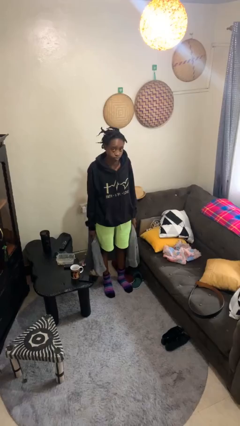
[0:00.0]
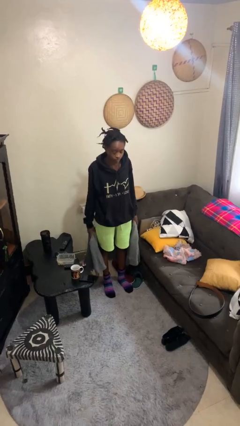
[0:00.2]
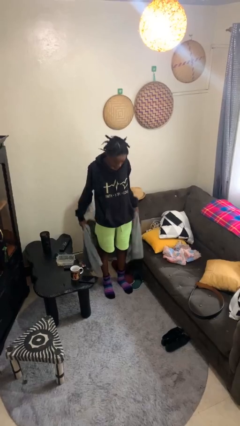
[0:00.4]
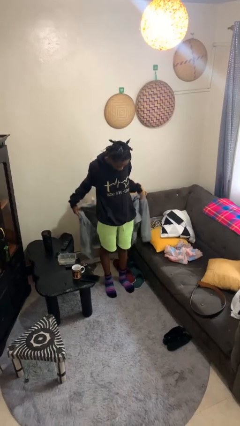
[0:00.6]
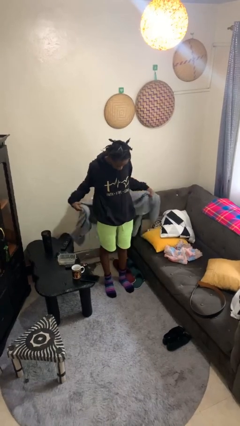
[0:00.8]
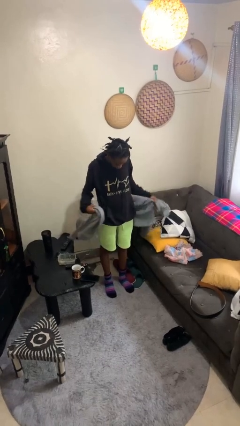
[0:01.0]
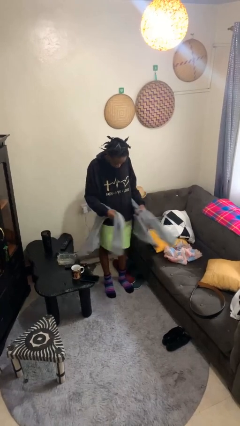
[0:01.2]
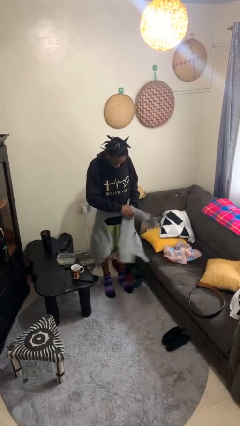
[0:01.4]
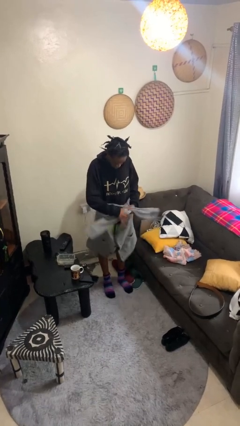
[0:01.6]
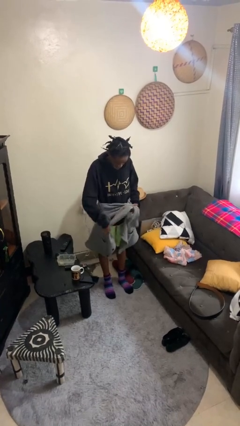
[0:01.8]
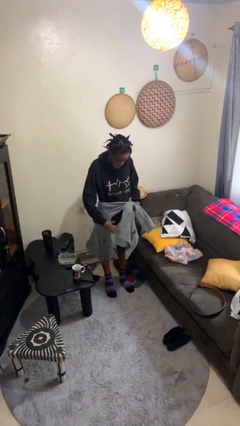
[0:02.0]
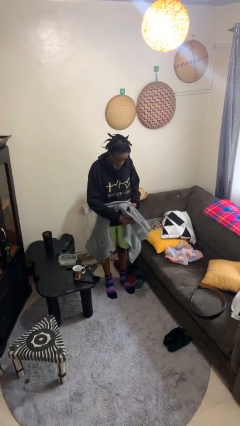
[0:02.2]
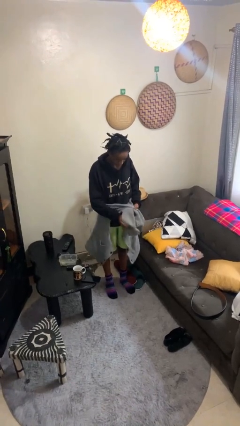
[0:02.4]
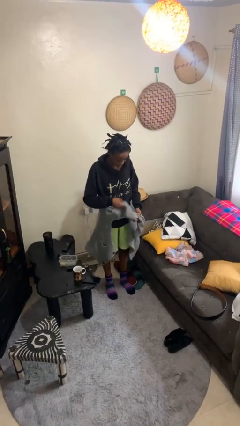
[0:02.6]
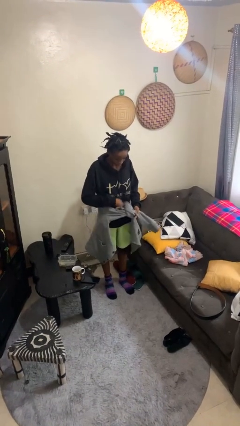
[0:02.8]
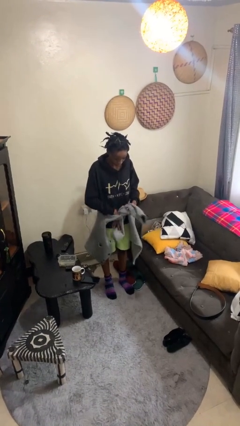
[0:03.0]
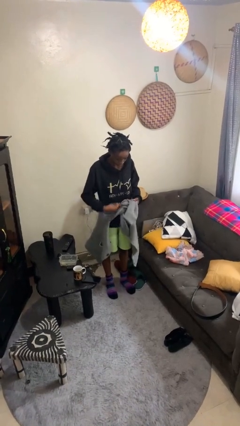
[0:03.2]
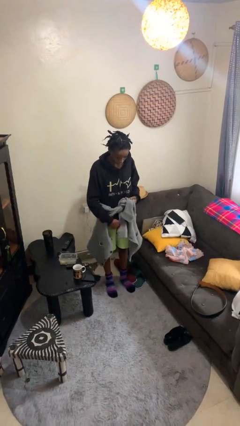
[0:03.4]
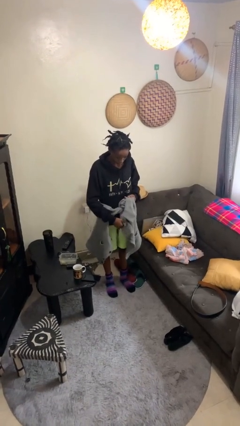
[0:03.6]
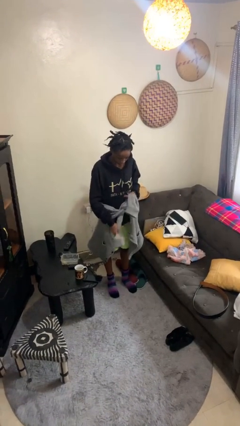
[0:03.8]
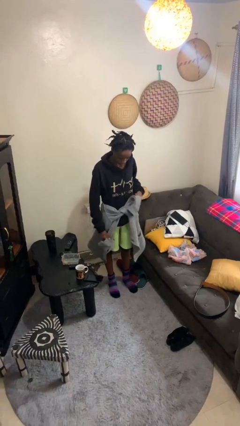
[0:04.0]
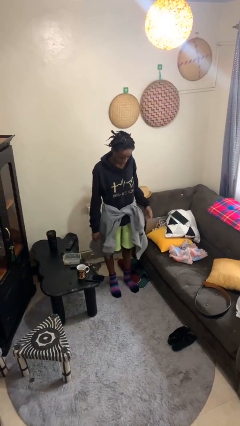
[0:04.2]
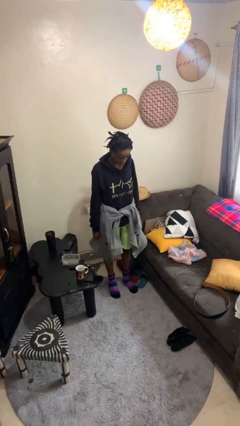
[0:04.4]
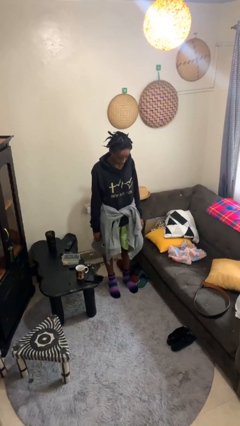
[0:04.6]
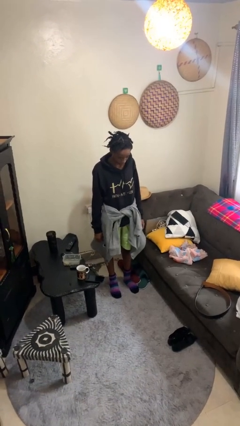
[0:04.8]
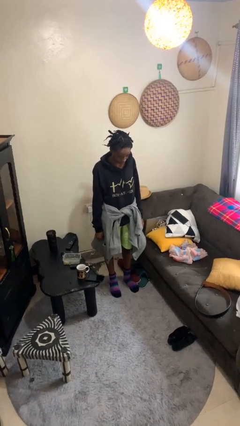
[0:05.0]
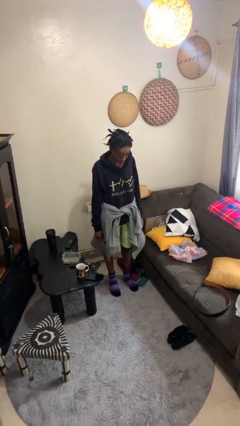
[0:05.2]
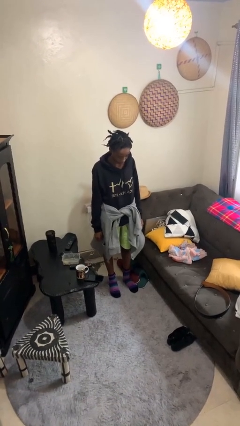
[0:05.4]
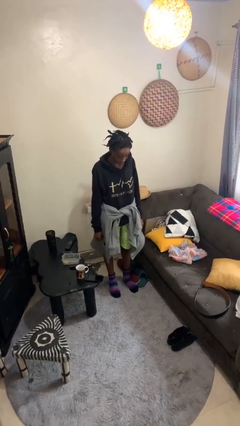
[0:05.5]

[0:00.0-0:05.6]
person ties jacket around waist

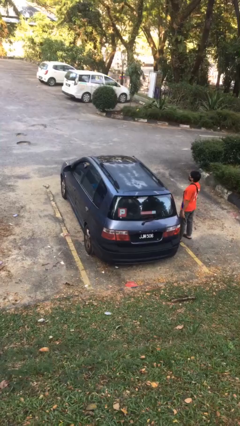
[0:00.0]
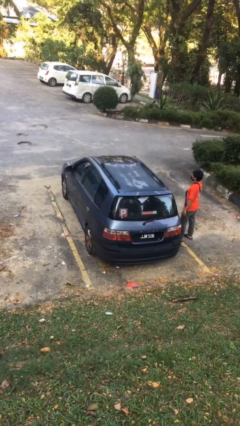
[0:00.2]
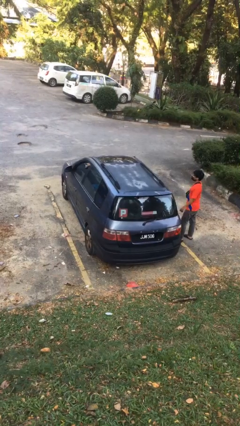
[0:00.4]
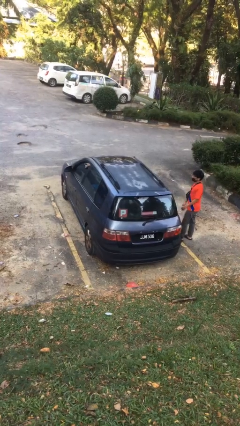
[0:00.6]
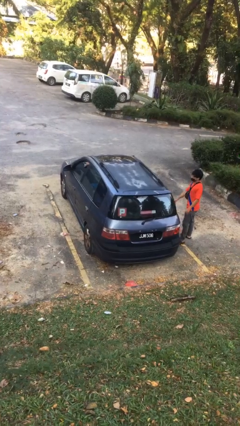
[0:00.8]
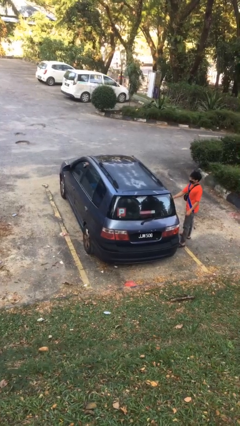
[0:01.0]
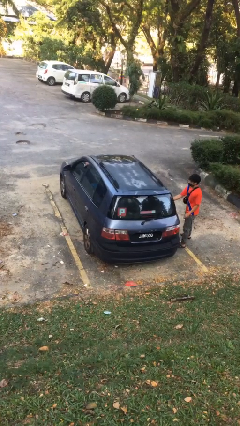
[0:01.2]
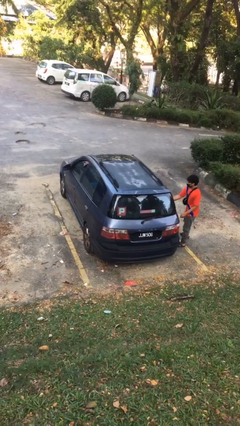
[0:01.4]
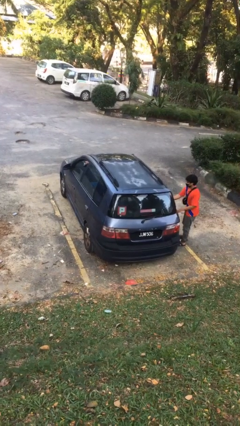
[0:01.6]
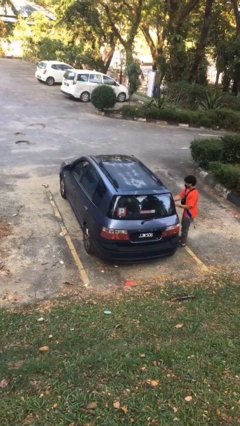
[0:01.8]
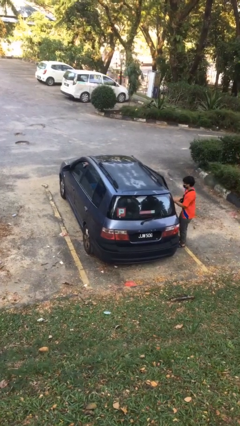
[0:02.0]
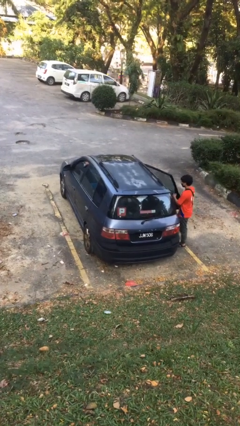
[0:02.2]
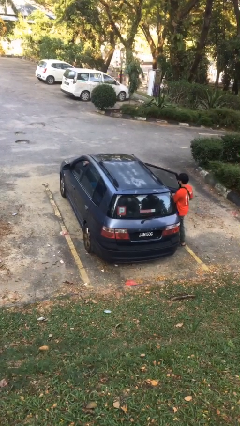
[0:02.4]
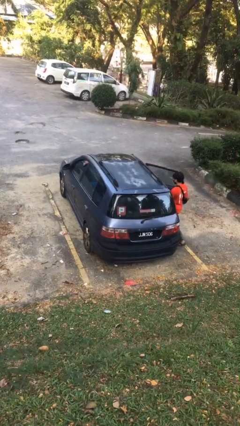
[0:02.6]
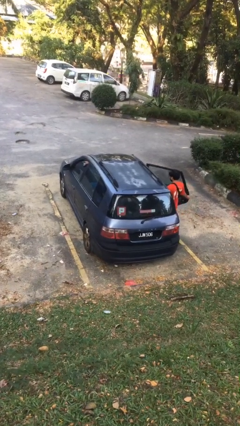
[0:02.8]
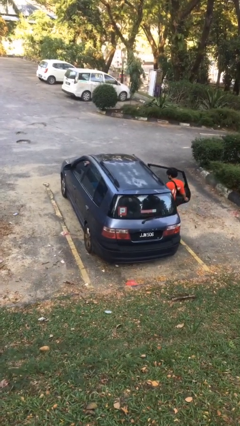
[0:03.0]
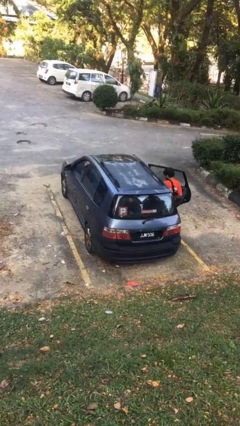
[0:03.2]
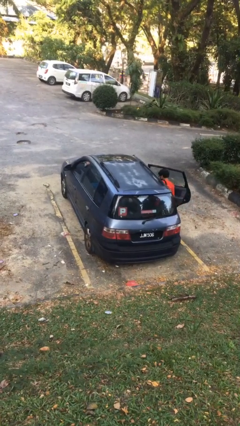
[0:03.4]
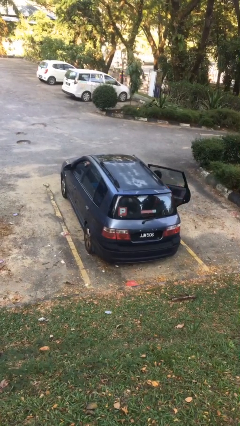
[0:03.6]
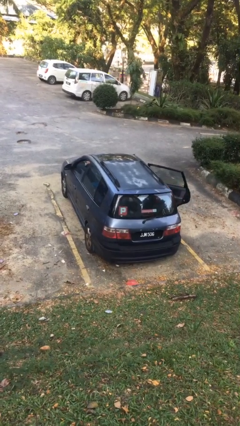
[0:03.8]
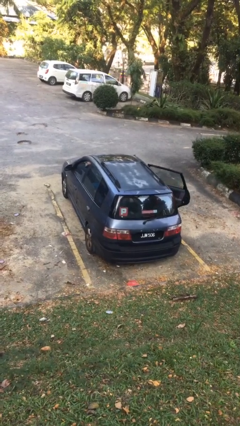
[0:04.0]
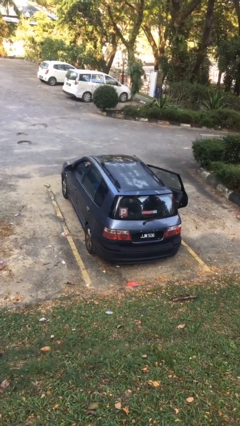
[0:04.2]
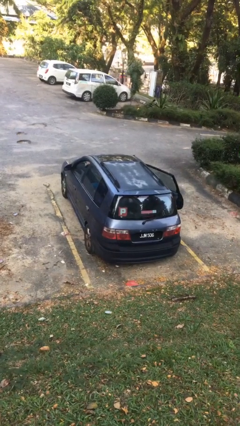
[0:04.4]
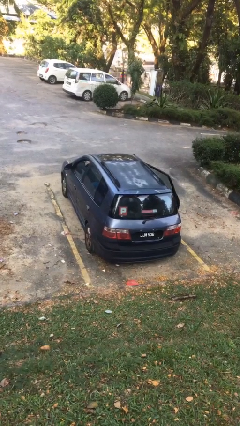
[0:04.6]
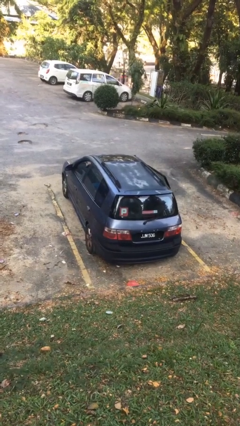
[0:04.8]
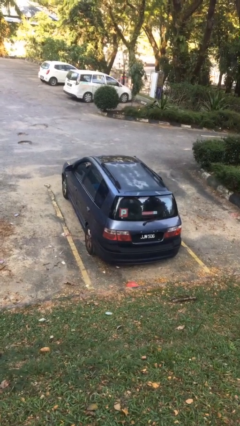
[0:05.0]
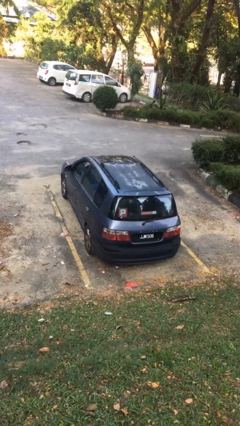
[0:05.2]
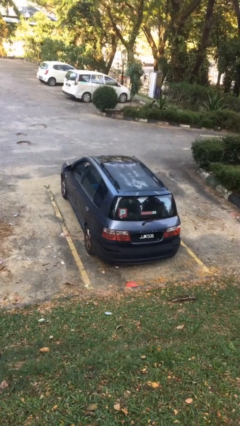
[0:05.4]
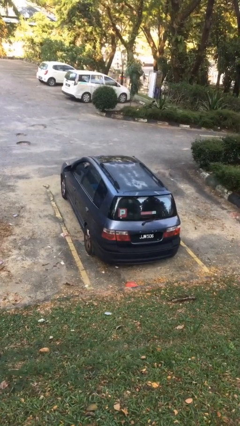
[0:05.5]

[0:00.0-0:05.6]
car picks up person

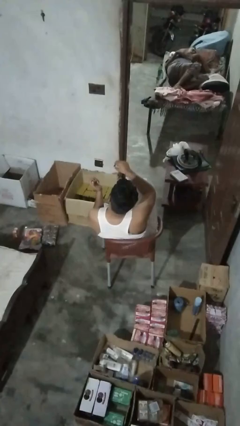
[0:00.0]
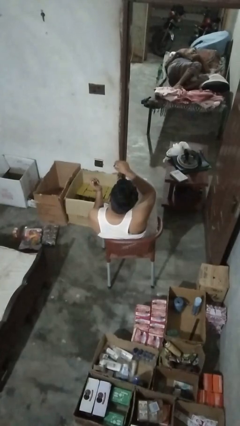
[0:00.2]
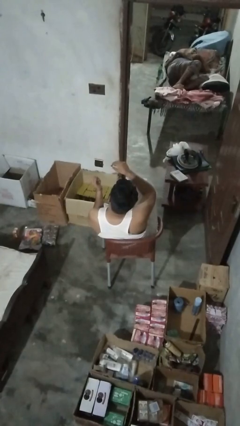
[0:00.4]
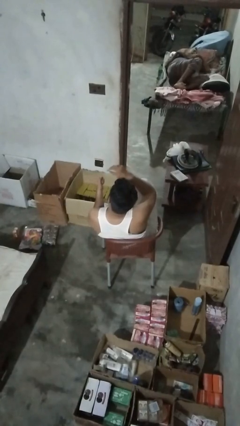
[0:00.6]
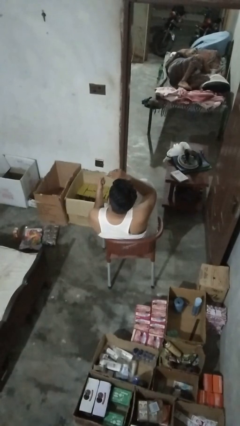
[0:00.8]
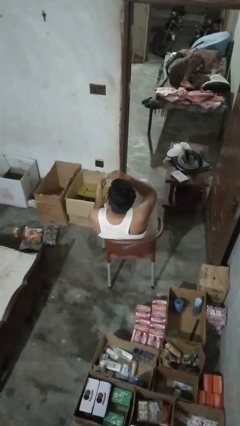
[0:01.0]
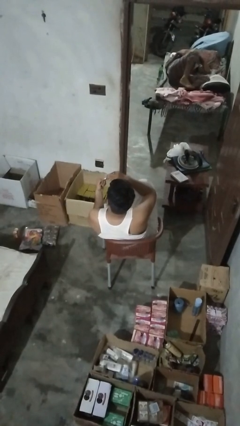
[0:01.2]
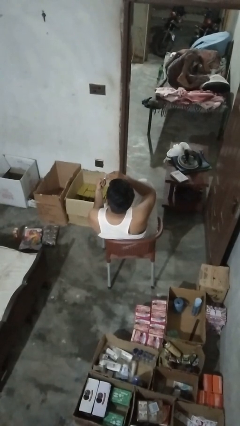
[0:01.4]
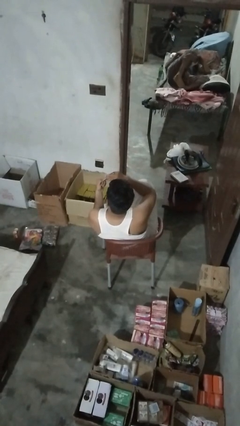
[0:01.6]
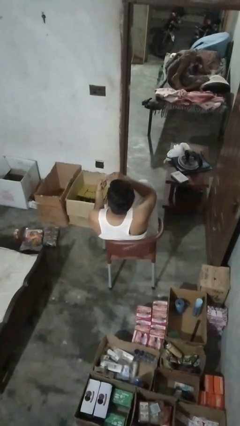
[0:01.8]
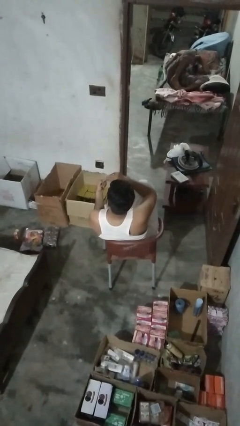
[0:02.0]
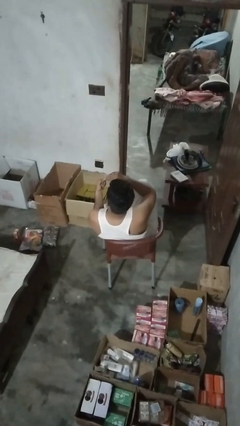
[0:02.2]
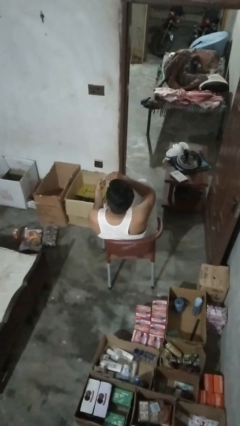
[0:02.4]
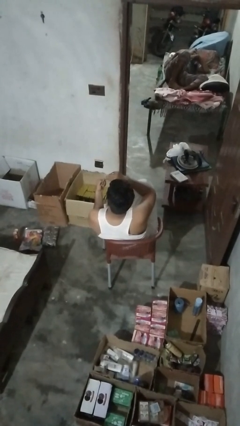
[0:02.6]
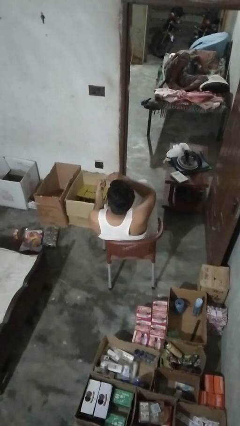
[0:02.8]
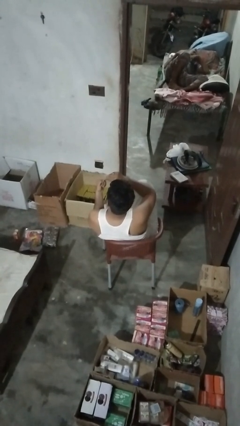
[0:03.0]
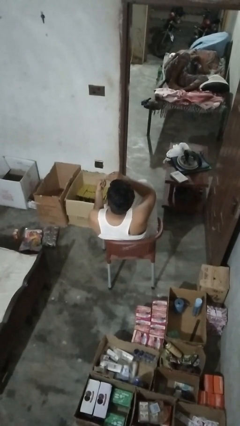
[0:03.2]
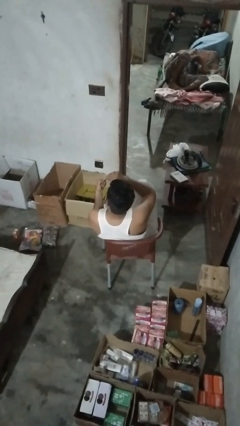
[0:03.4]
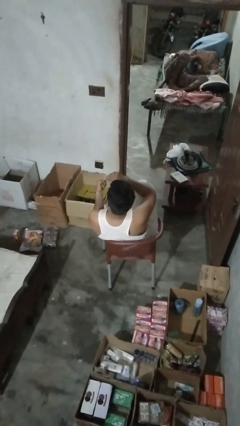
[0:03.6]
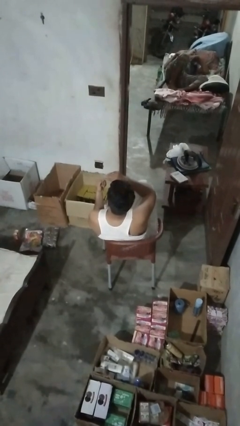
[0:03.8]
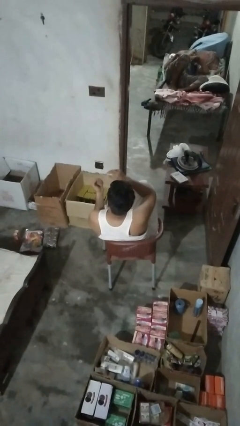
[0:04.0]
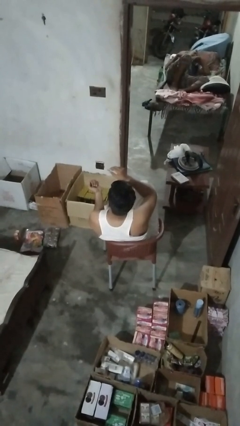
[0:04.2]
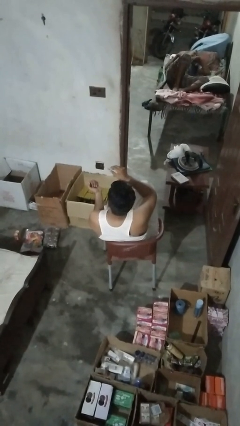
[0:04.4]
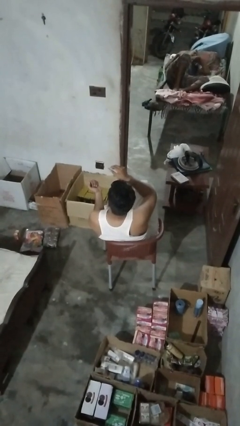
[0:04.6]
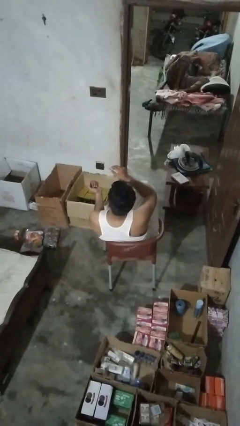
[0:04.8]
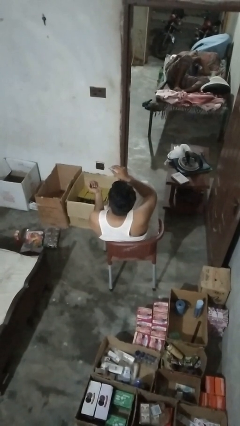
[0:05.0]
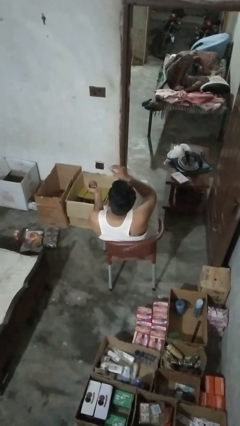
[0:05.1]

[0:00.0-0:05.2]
person clips fingernails

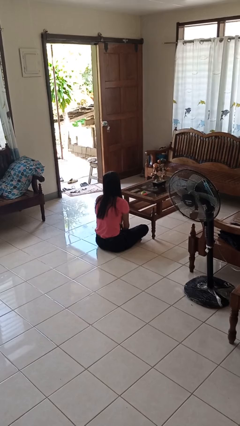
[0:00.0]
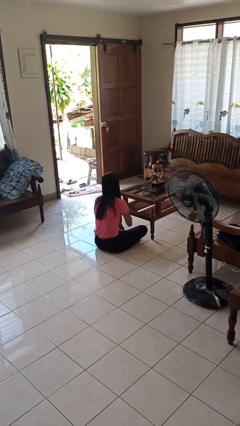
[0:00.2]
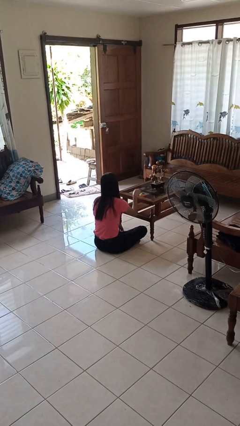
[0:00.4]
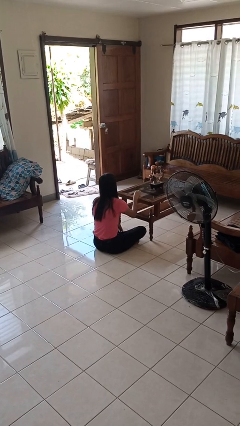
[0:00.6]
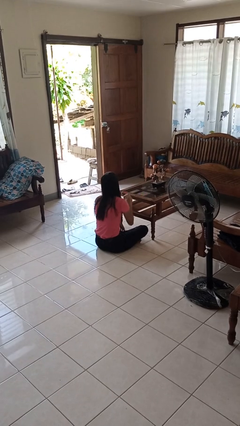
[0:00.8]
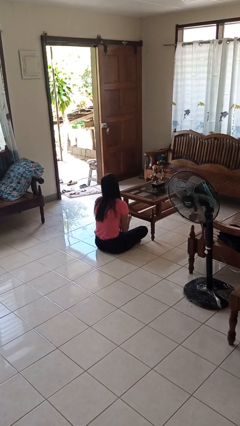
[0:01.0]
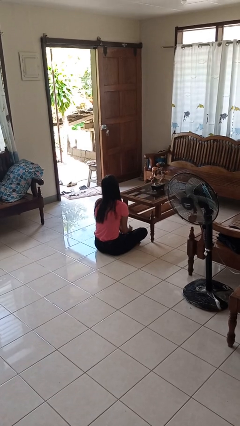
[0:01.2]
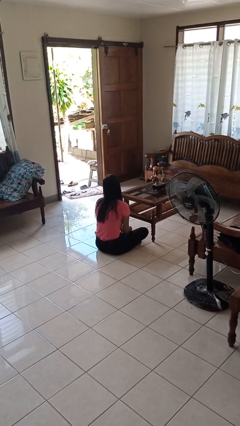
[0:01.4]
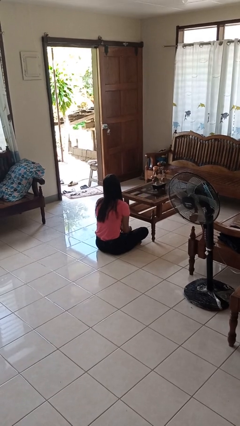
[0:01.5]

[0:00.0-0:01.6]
person picks up object from table
